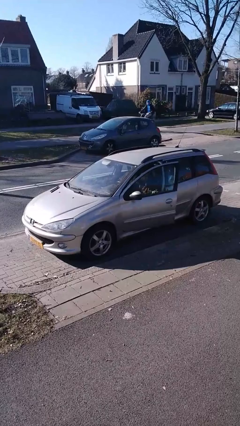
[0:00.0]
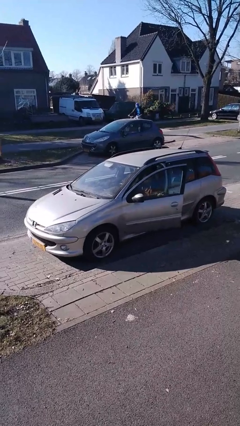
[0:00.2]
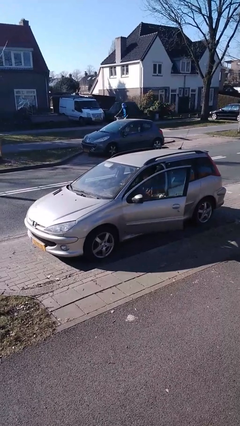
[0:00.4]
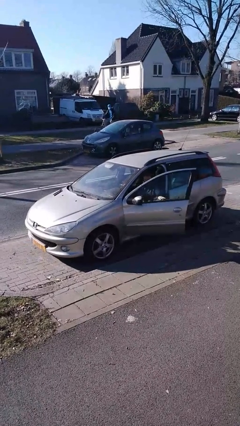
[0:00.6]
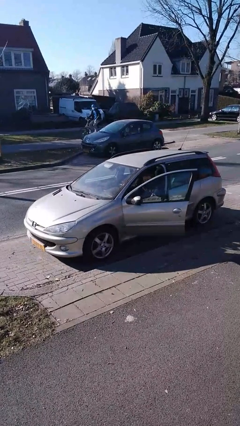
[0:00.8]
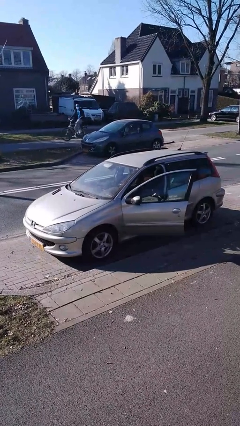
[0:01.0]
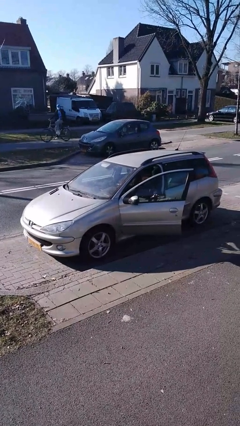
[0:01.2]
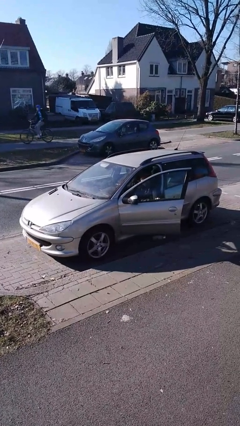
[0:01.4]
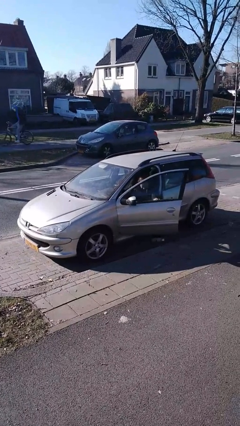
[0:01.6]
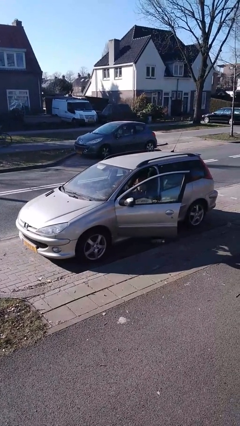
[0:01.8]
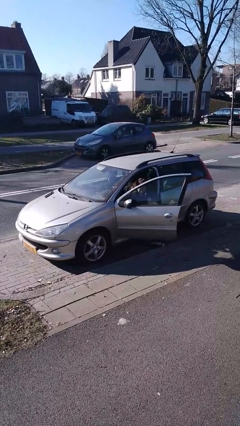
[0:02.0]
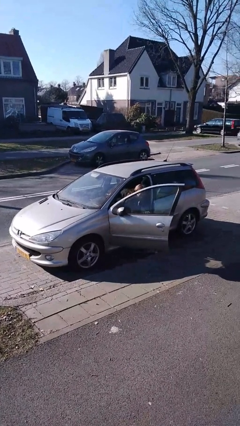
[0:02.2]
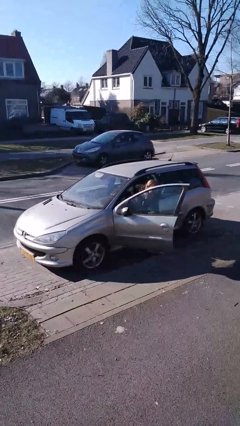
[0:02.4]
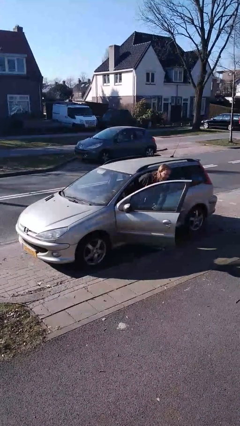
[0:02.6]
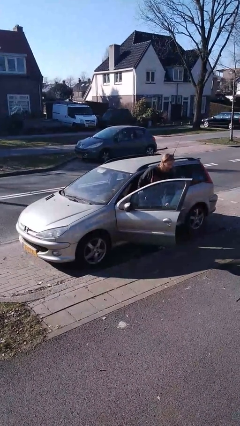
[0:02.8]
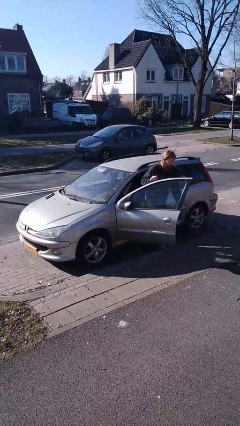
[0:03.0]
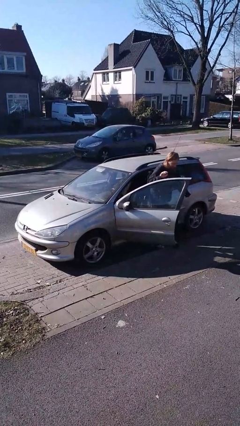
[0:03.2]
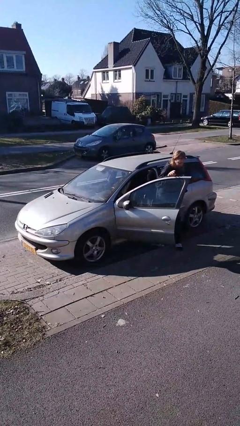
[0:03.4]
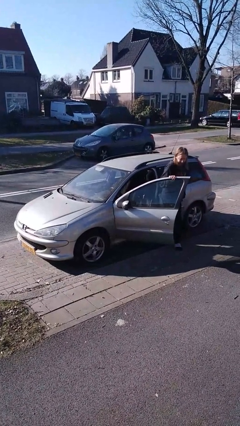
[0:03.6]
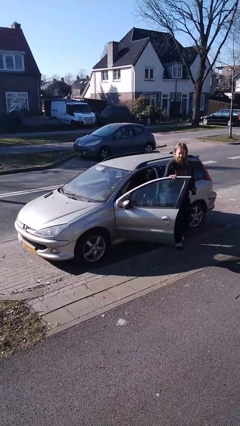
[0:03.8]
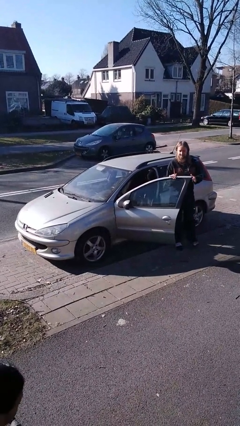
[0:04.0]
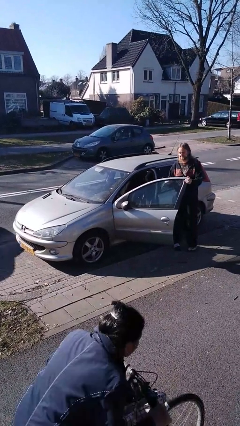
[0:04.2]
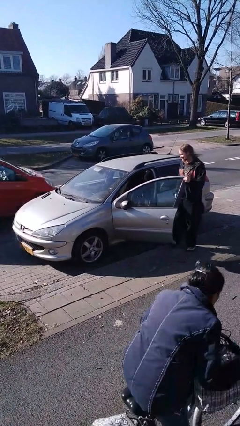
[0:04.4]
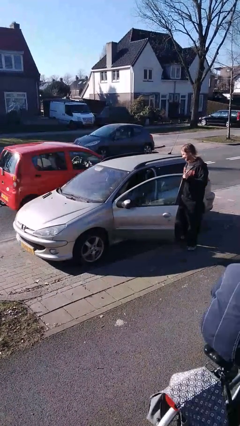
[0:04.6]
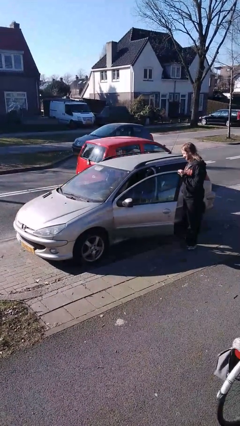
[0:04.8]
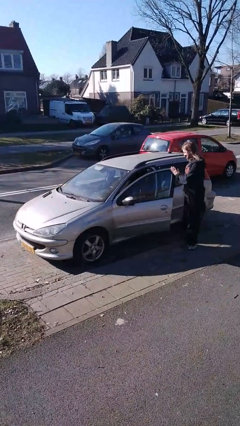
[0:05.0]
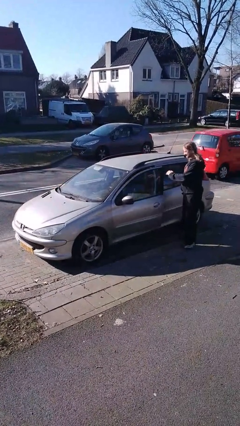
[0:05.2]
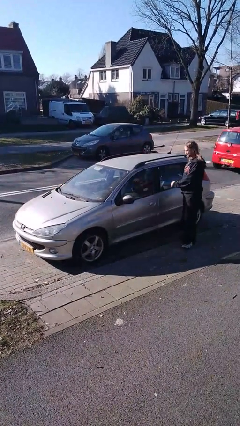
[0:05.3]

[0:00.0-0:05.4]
car drops off person

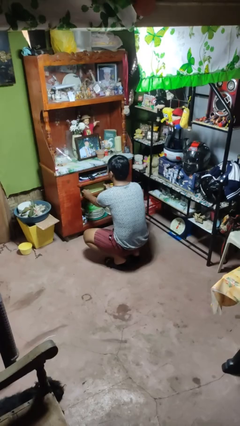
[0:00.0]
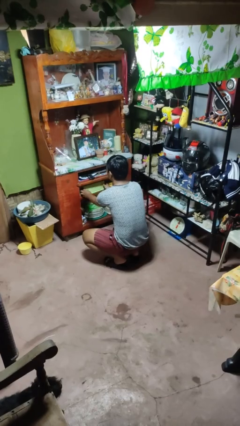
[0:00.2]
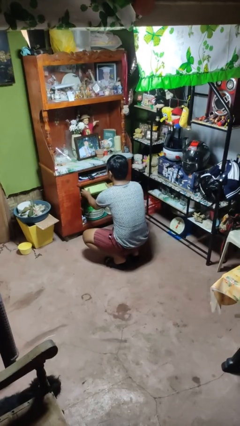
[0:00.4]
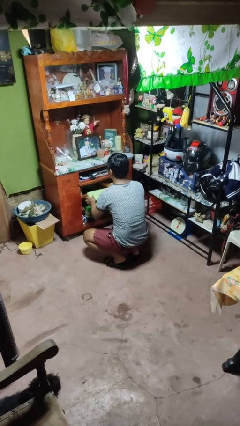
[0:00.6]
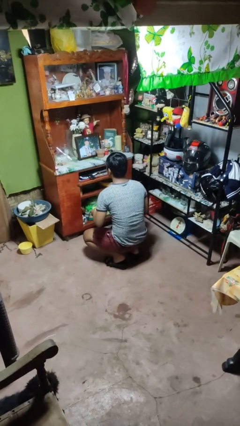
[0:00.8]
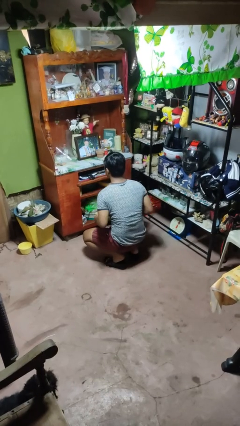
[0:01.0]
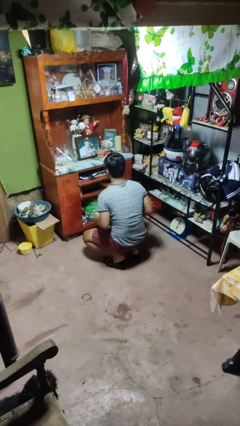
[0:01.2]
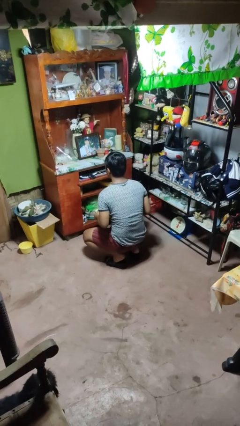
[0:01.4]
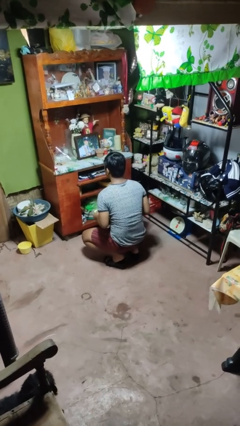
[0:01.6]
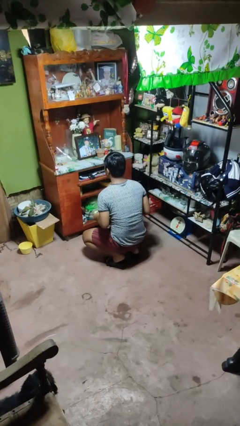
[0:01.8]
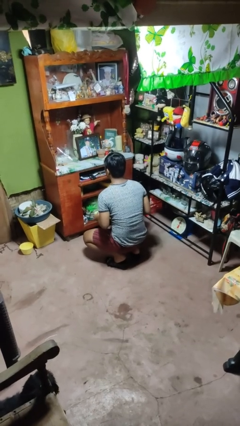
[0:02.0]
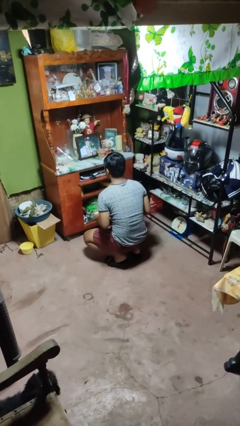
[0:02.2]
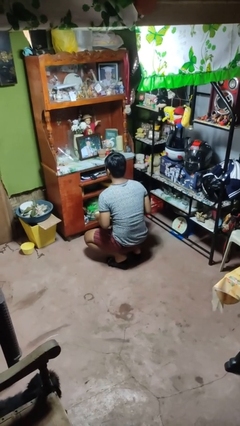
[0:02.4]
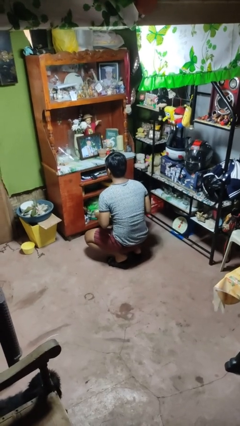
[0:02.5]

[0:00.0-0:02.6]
person picks up object from cabinet

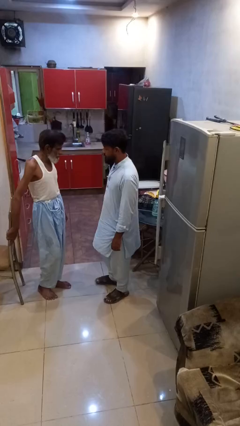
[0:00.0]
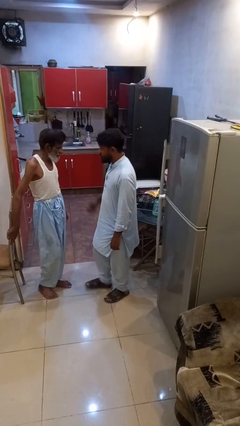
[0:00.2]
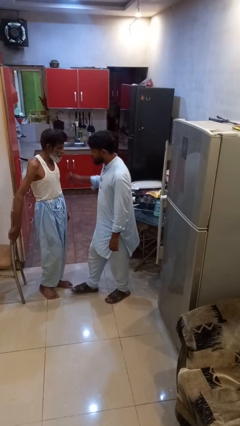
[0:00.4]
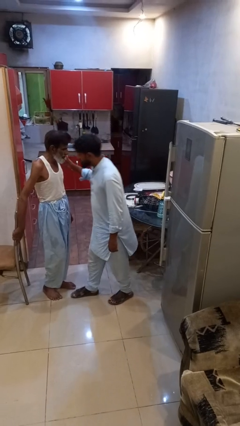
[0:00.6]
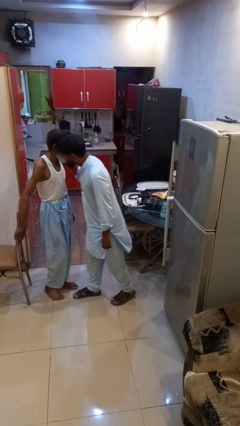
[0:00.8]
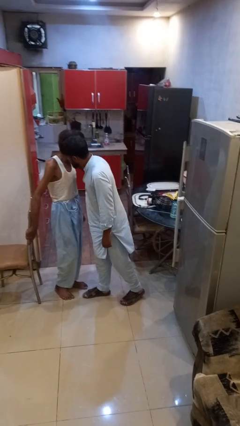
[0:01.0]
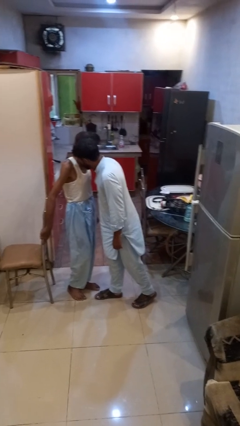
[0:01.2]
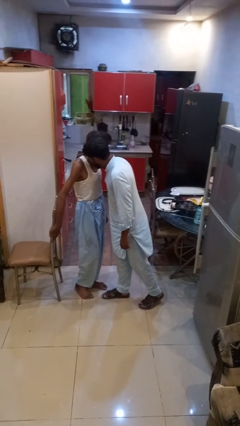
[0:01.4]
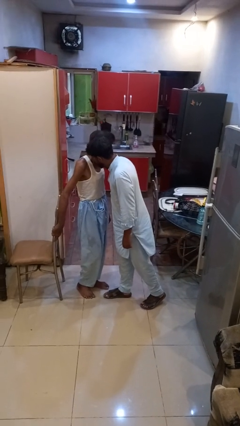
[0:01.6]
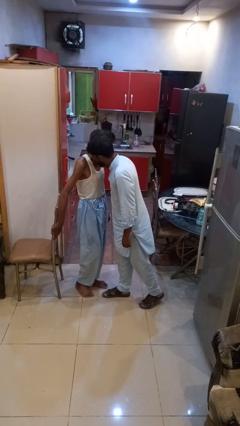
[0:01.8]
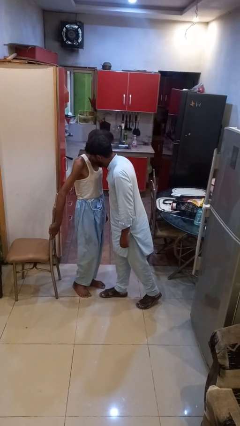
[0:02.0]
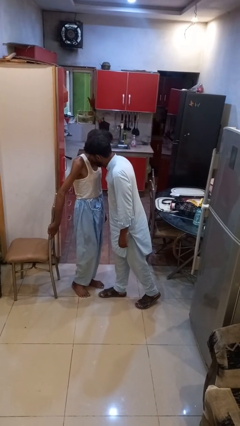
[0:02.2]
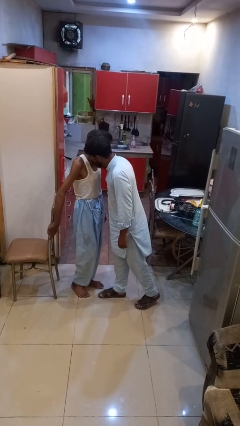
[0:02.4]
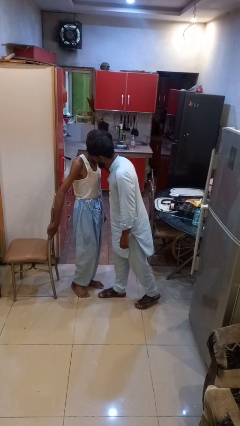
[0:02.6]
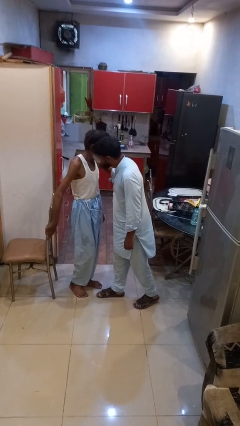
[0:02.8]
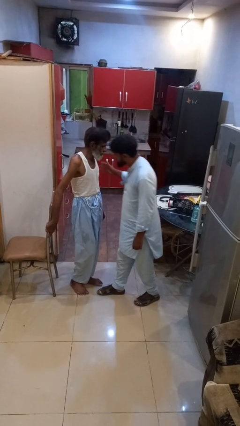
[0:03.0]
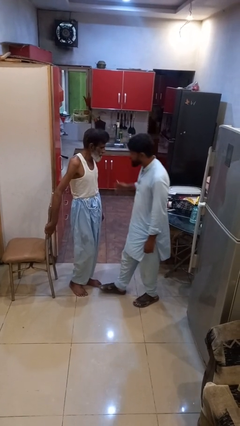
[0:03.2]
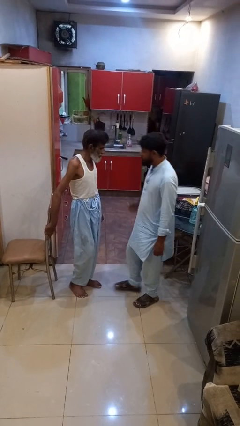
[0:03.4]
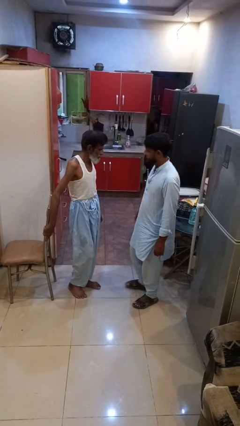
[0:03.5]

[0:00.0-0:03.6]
person kisses cheek of person

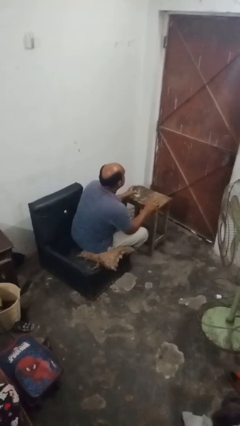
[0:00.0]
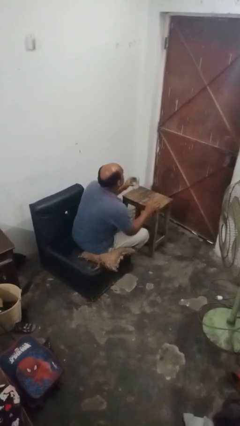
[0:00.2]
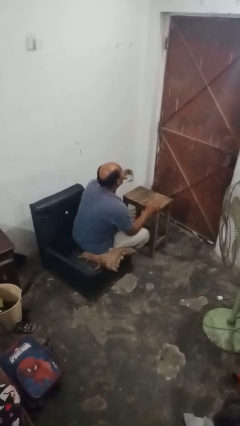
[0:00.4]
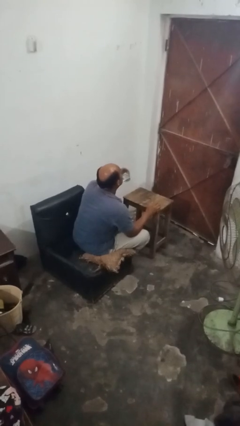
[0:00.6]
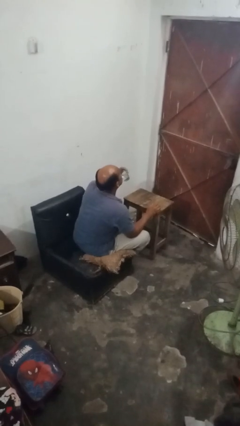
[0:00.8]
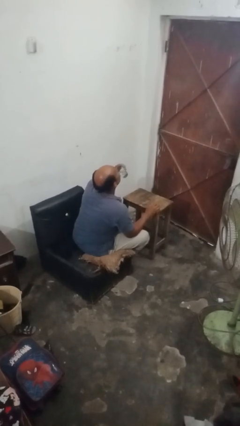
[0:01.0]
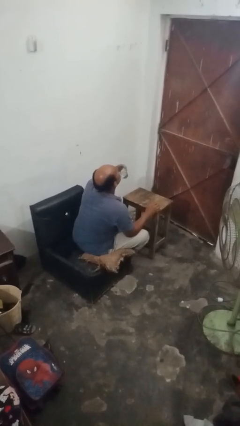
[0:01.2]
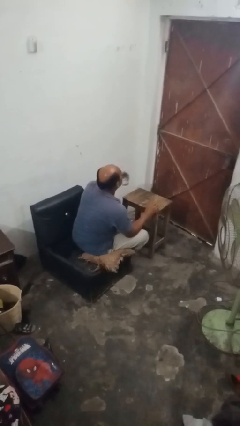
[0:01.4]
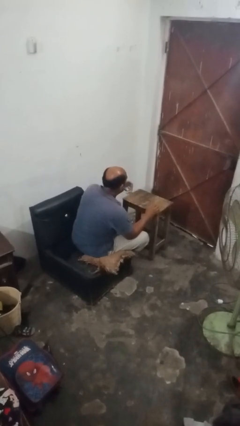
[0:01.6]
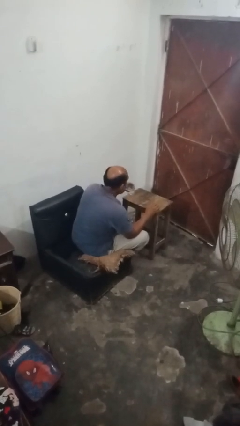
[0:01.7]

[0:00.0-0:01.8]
person drinks from cup

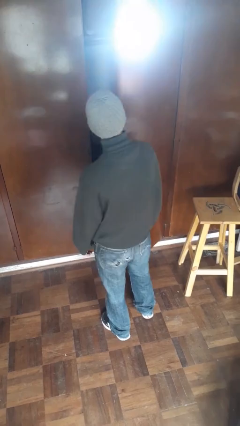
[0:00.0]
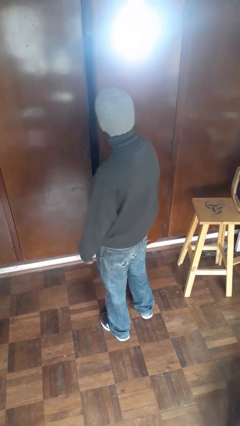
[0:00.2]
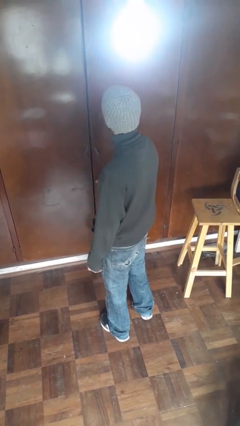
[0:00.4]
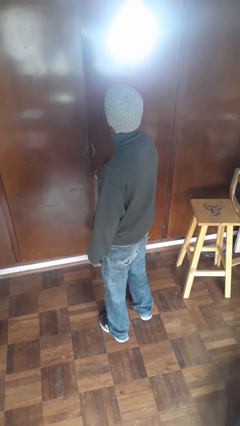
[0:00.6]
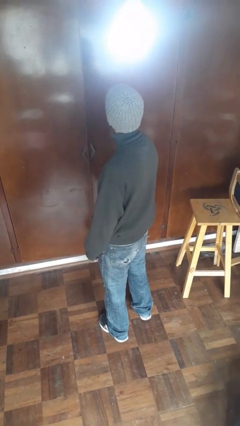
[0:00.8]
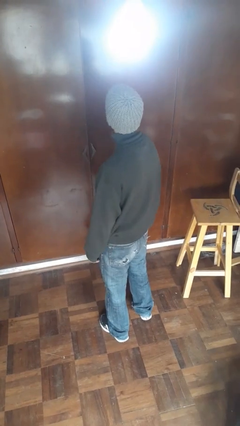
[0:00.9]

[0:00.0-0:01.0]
person closes closet door

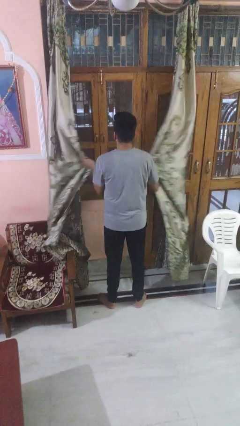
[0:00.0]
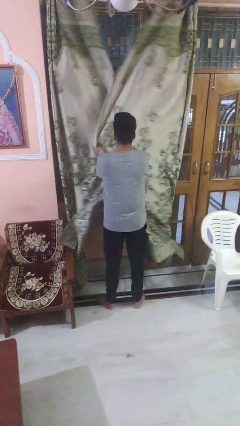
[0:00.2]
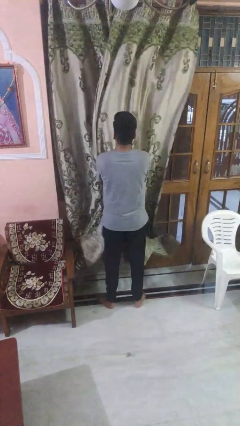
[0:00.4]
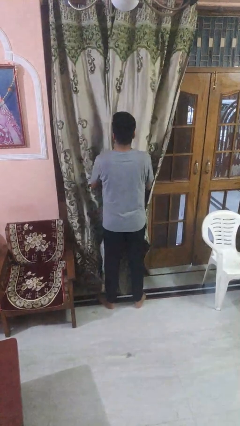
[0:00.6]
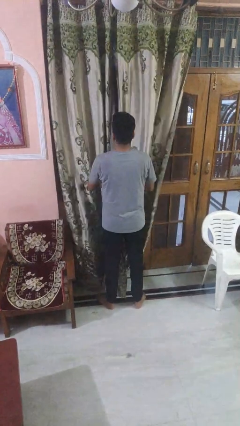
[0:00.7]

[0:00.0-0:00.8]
person closes curtains

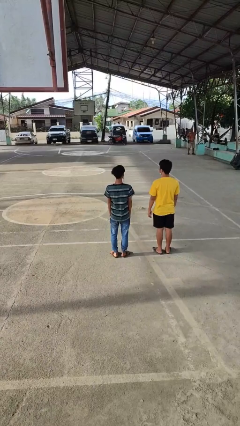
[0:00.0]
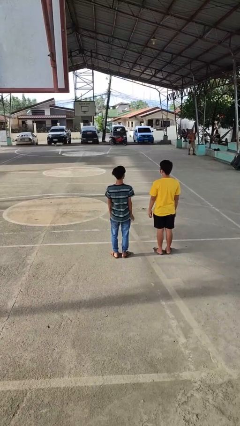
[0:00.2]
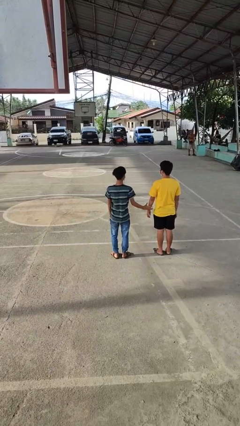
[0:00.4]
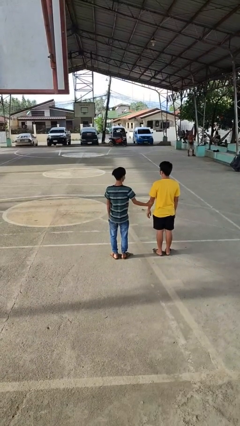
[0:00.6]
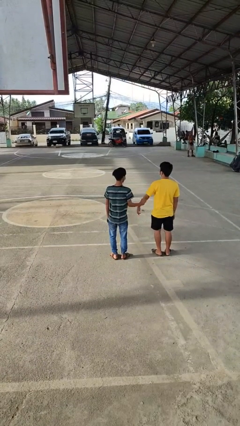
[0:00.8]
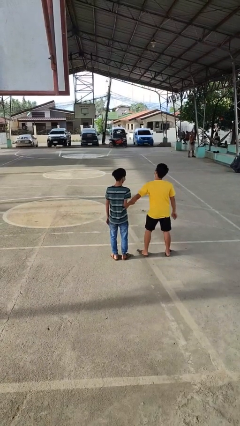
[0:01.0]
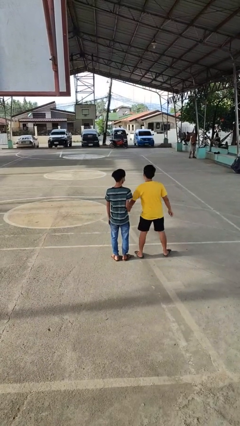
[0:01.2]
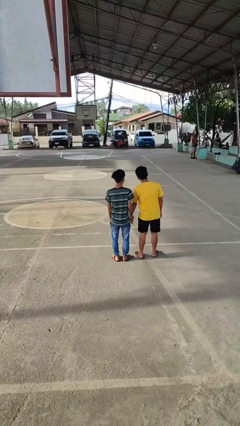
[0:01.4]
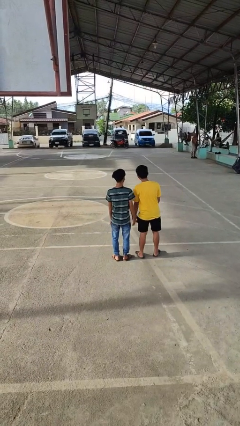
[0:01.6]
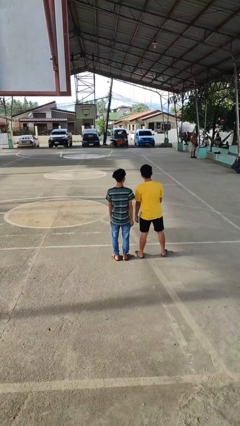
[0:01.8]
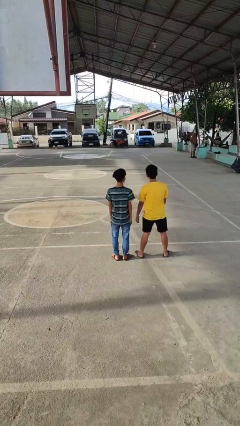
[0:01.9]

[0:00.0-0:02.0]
person grabs person by forearm
